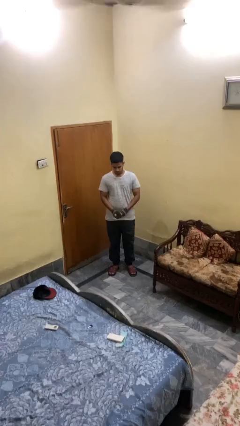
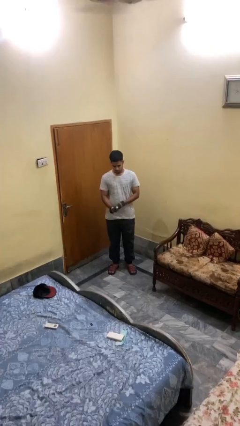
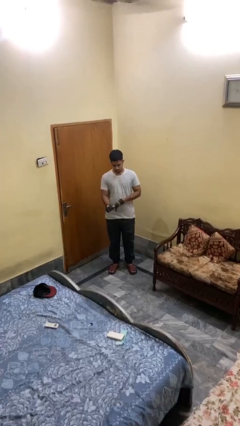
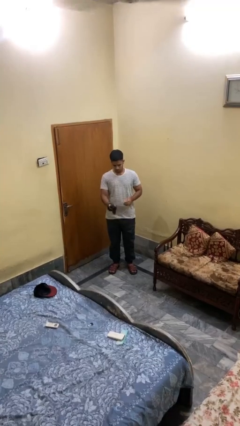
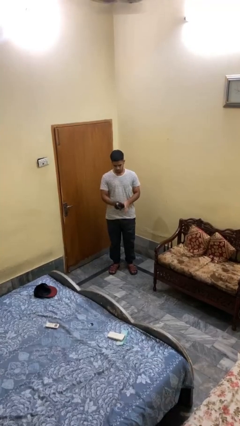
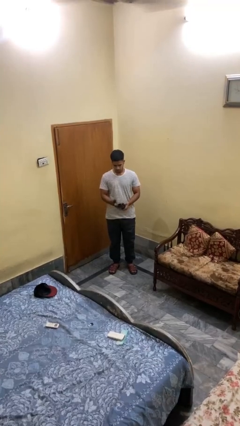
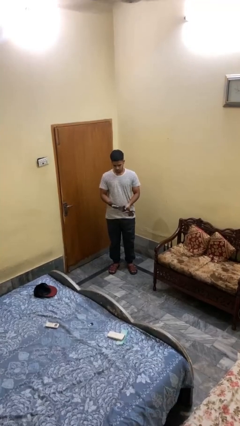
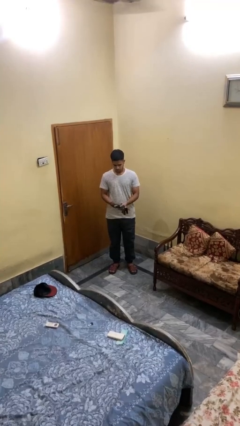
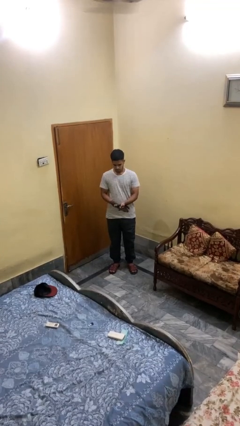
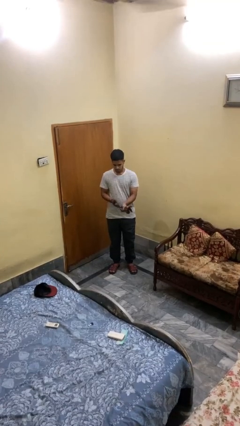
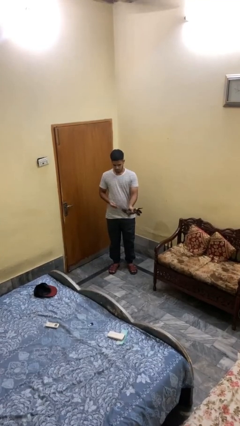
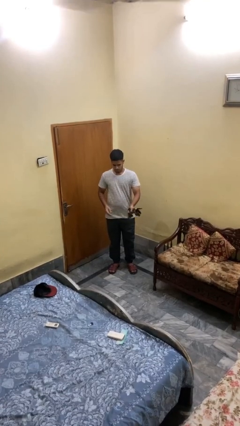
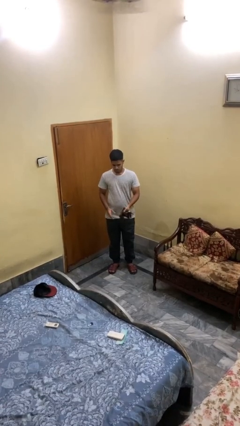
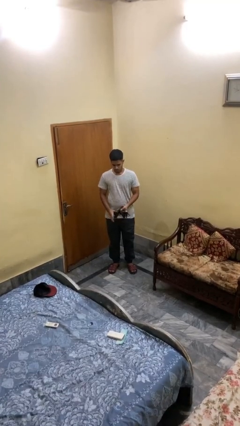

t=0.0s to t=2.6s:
person takes off gloves

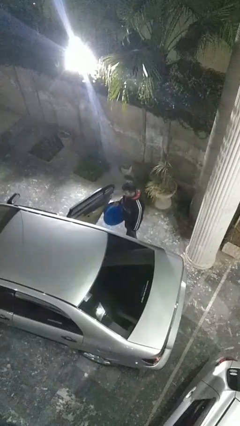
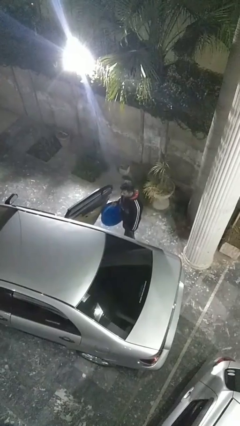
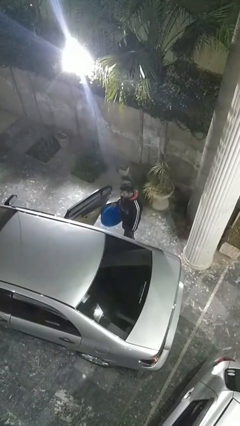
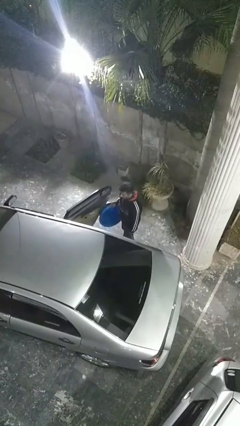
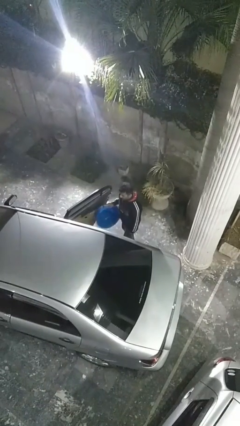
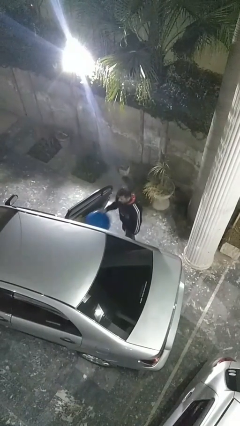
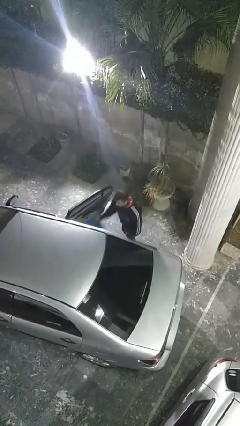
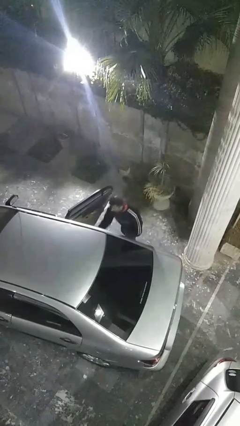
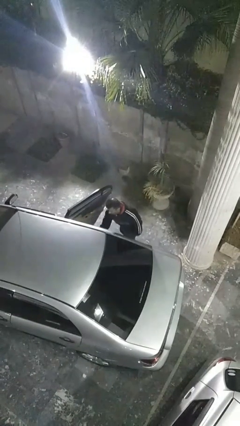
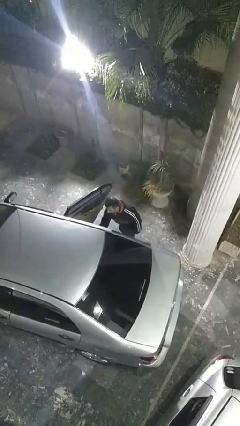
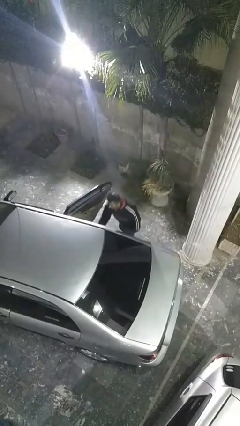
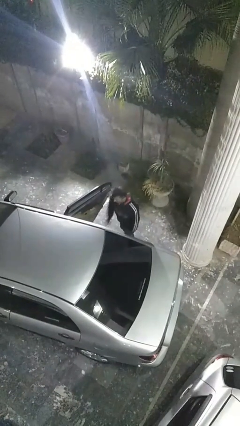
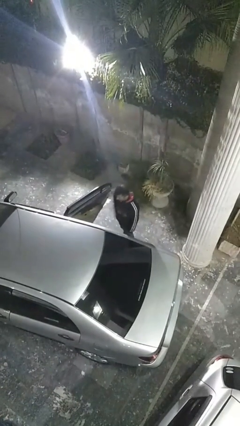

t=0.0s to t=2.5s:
person loads car

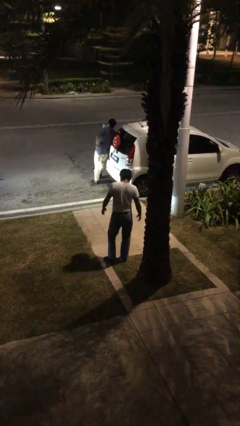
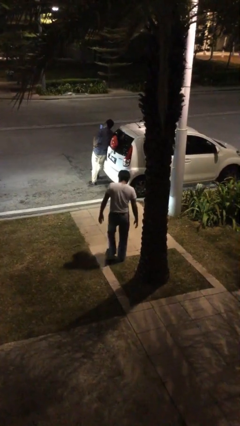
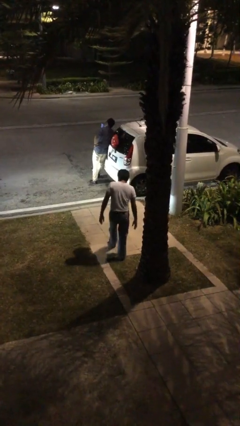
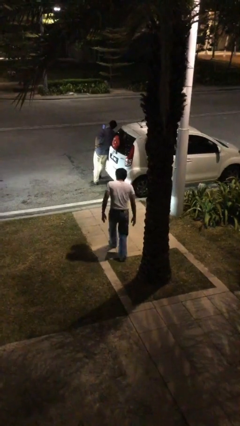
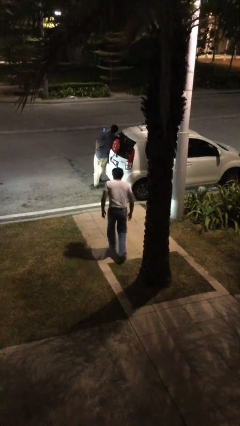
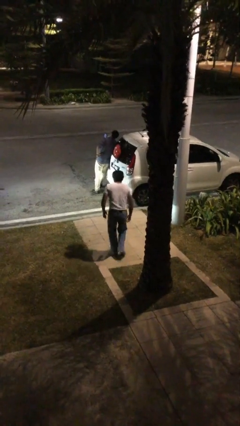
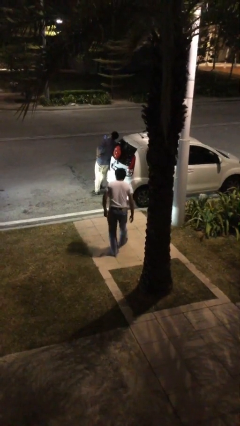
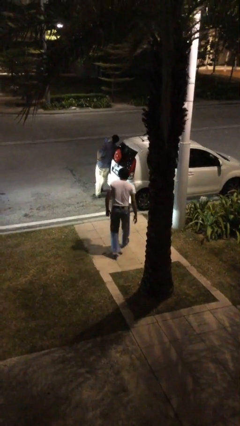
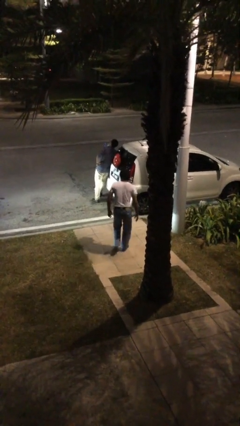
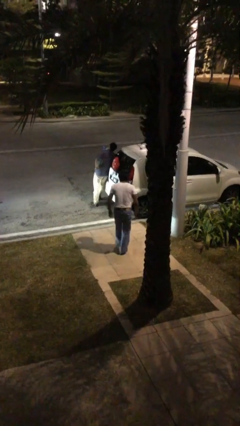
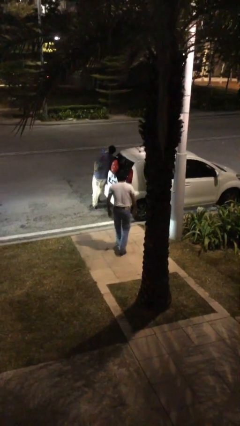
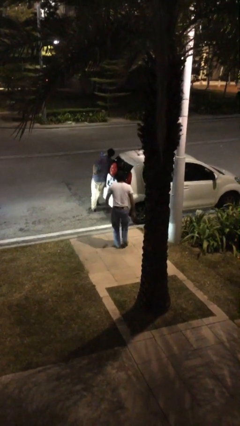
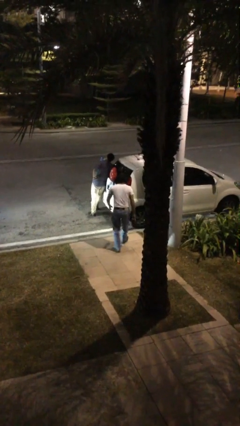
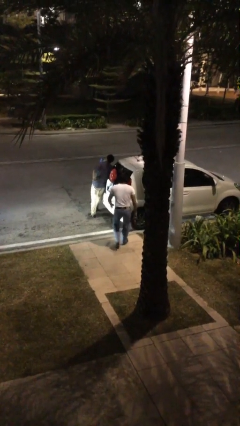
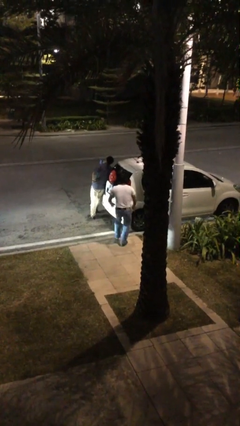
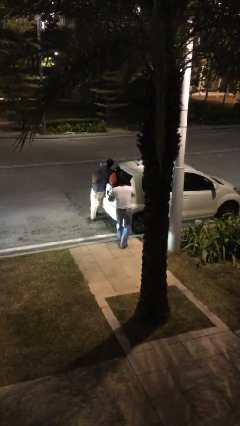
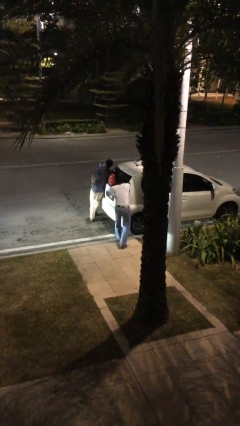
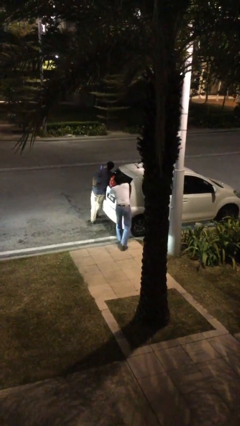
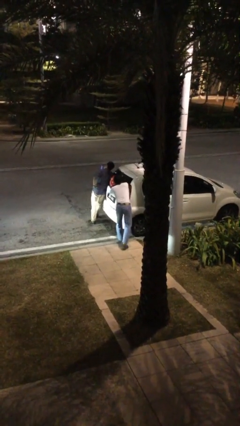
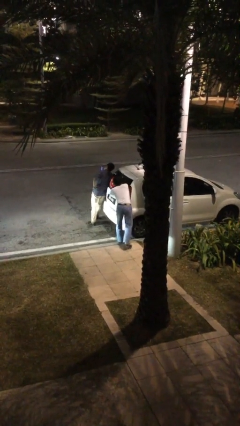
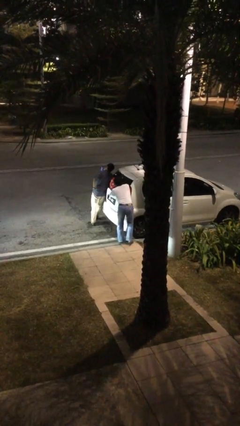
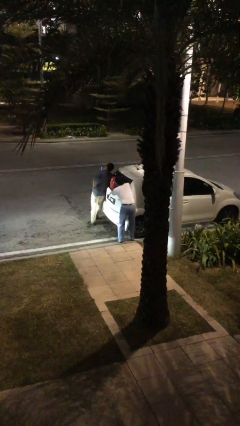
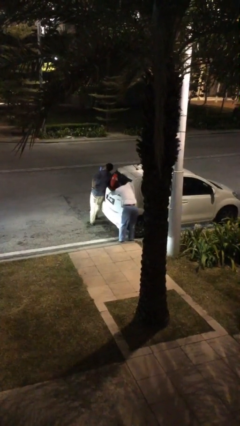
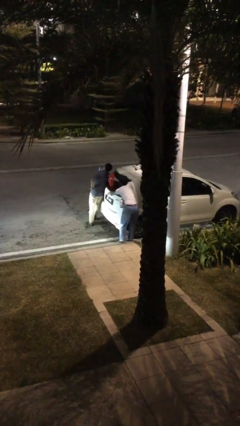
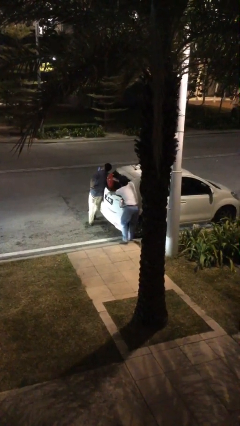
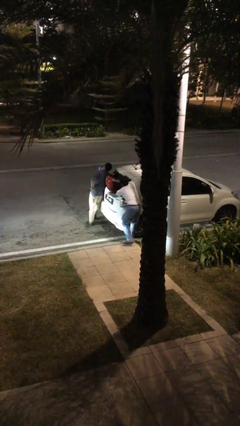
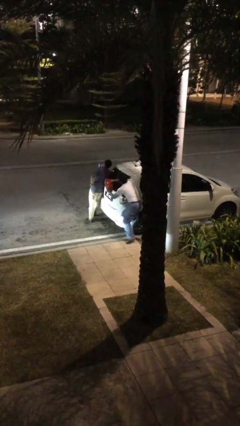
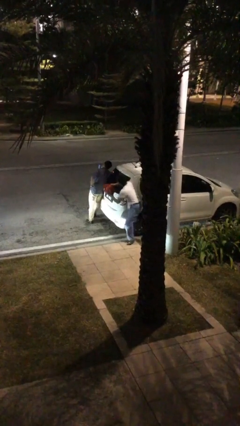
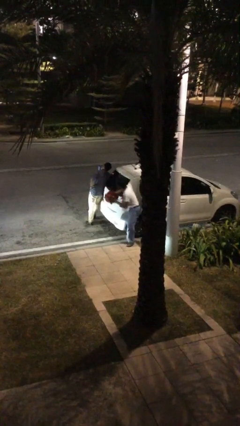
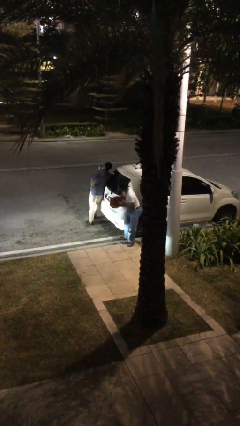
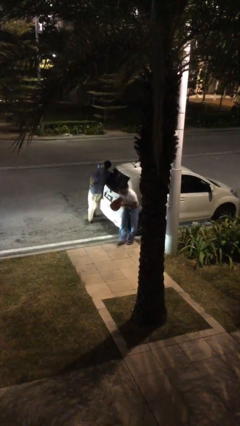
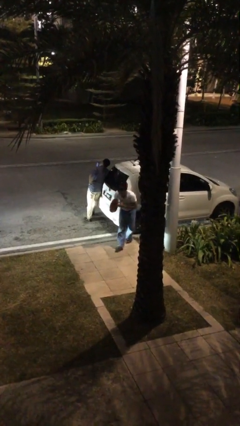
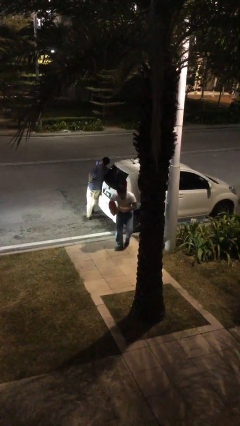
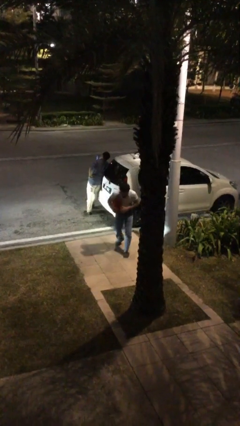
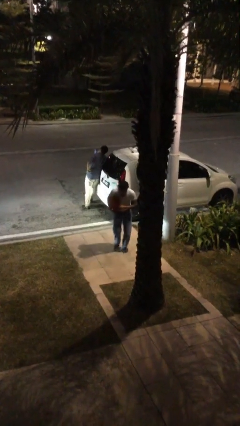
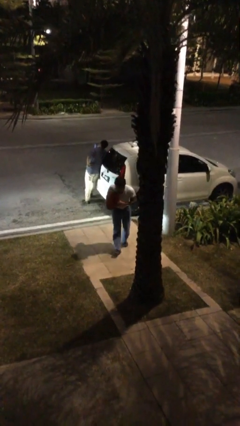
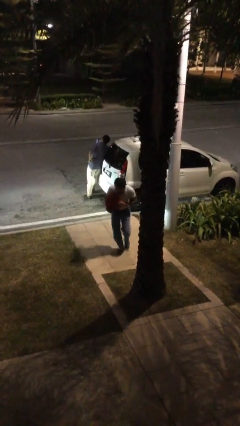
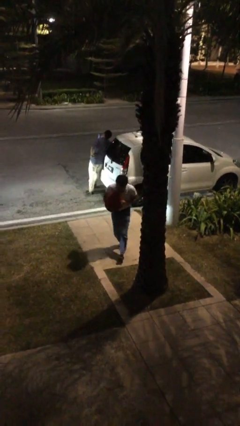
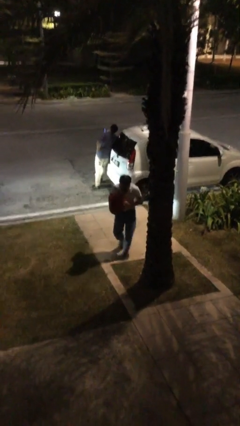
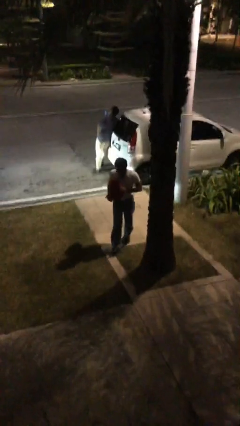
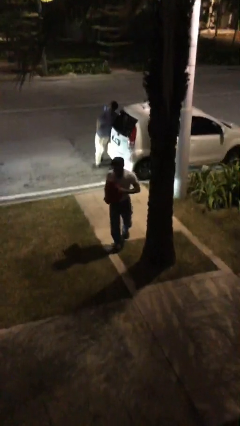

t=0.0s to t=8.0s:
person steals object from person

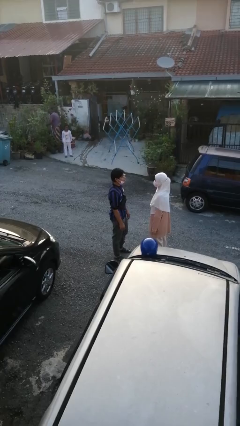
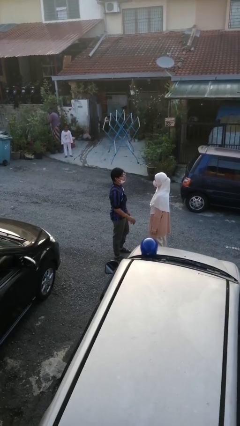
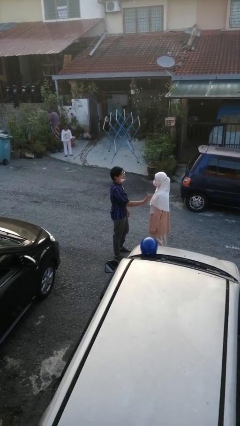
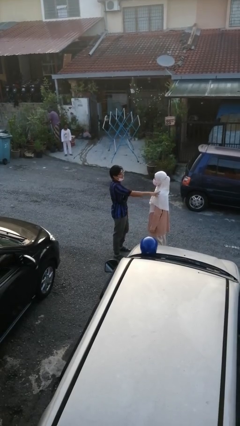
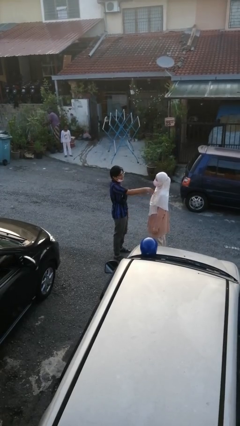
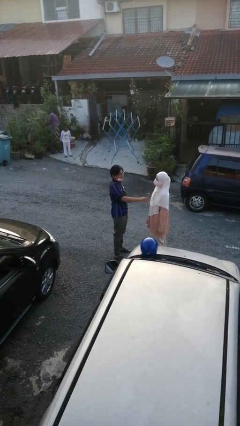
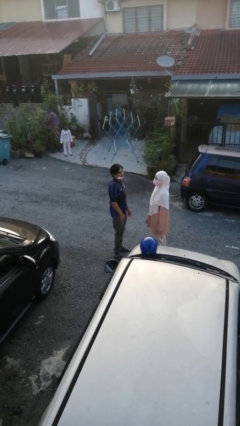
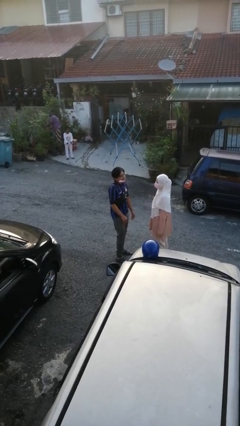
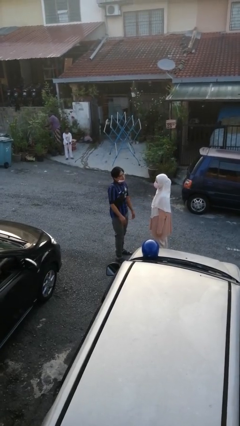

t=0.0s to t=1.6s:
person shoves person

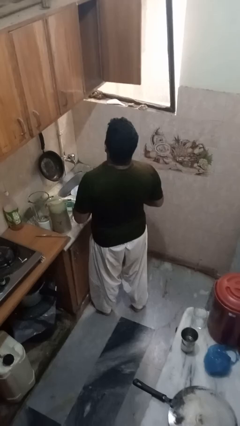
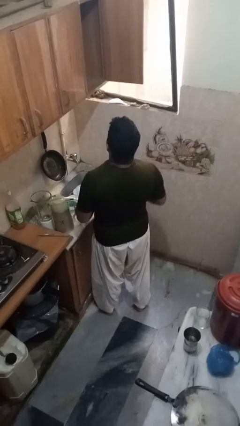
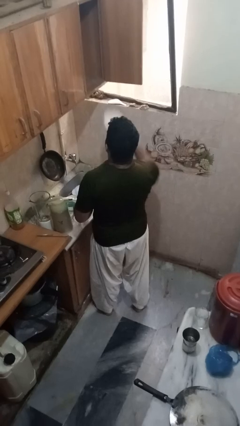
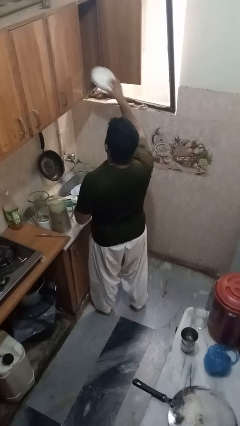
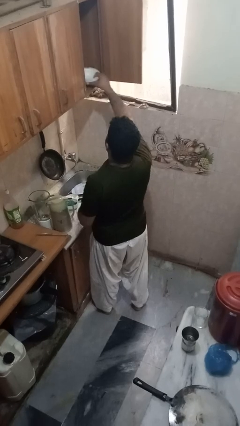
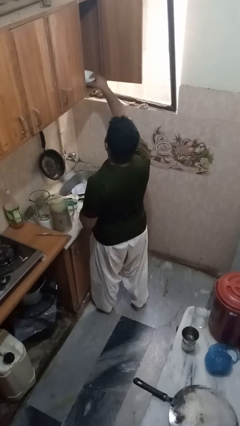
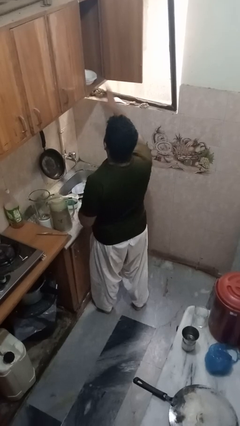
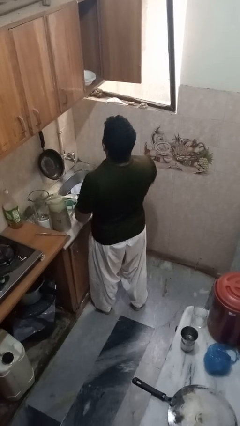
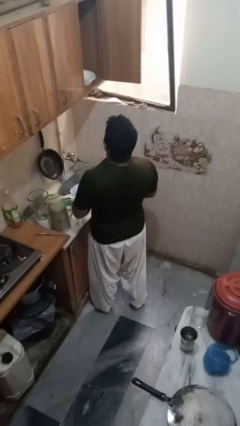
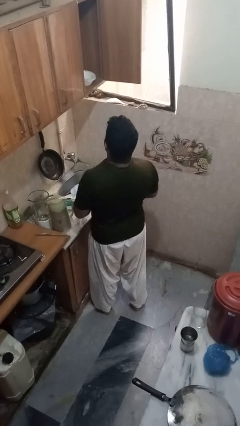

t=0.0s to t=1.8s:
person puts object in cabinet

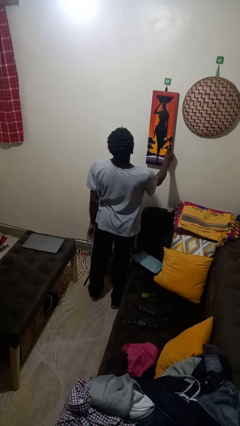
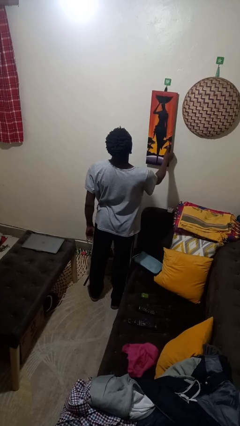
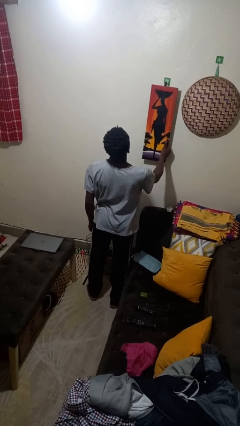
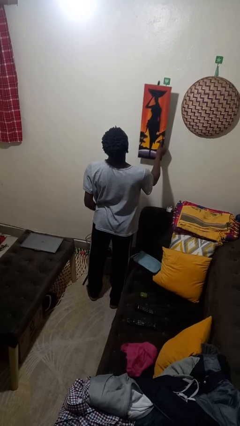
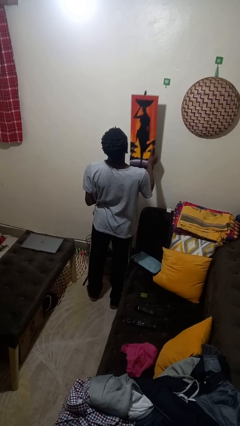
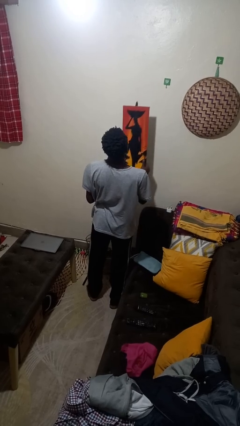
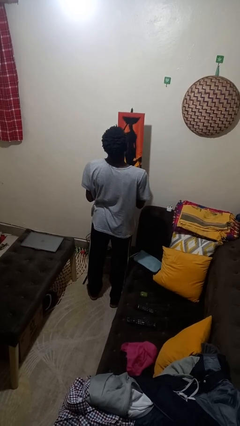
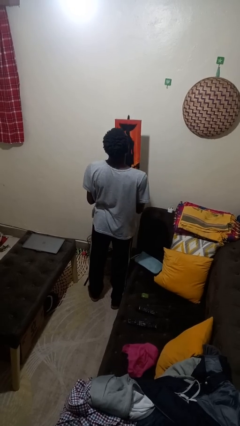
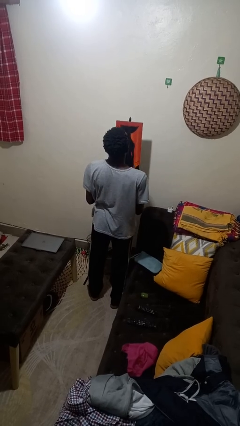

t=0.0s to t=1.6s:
person takes down picture frame
